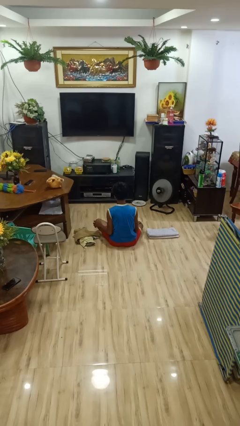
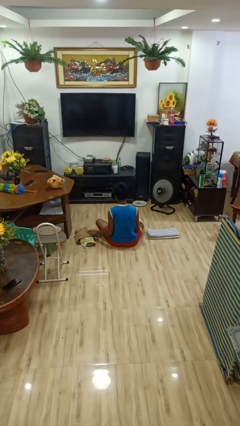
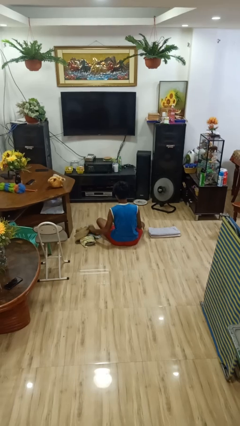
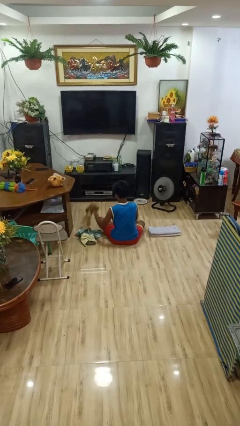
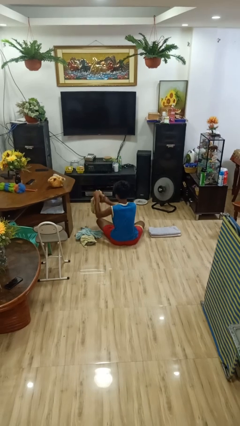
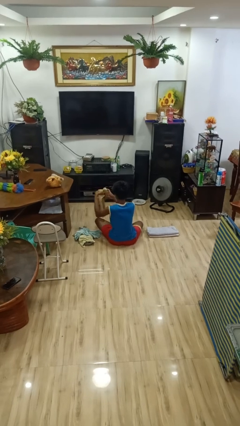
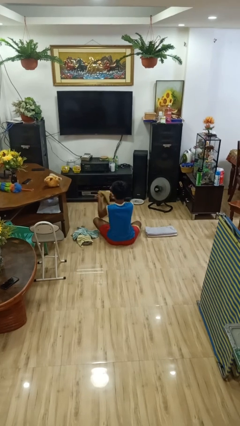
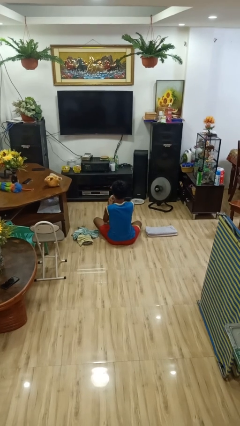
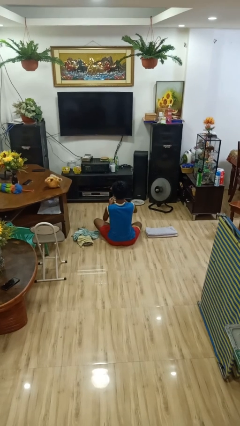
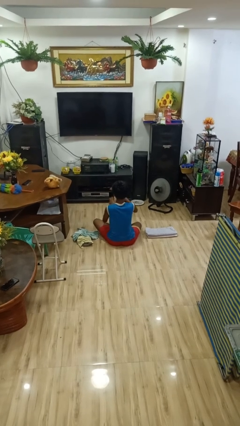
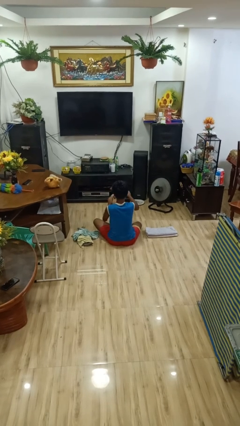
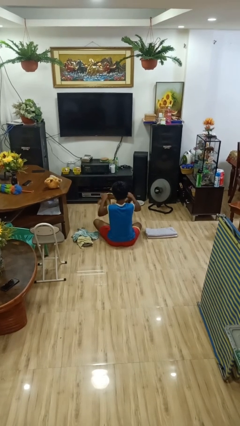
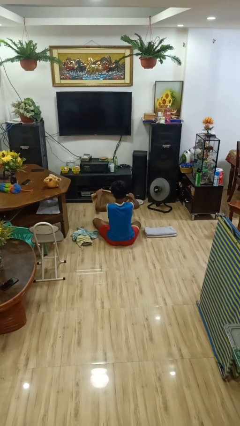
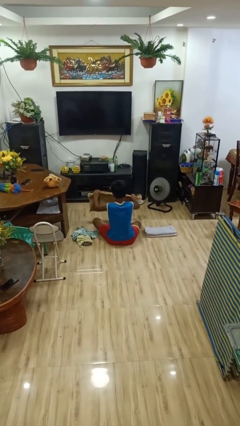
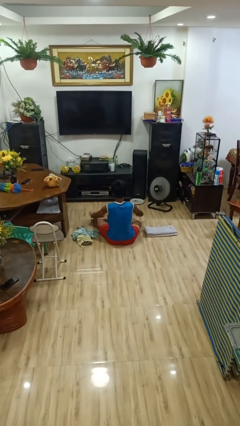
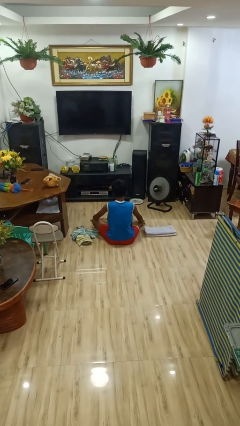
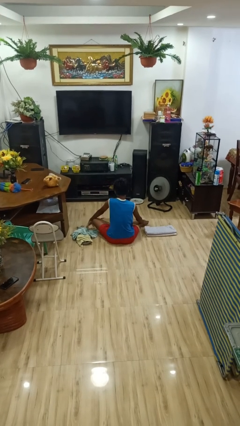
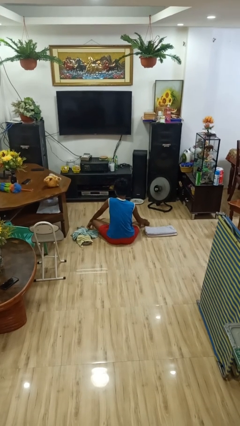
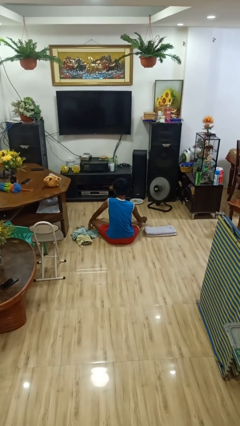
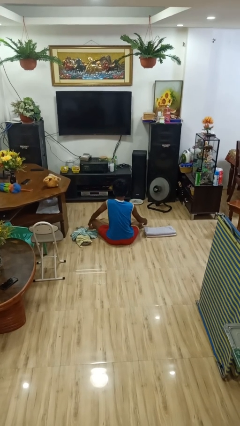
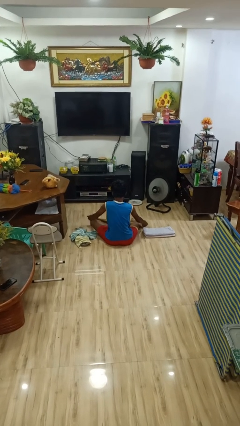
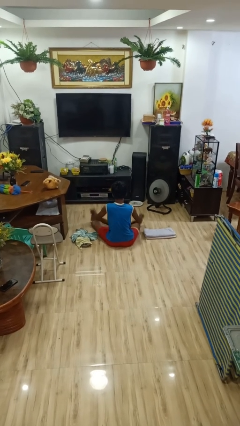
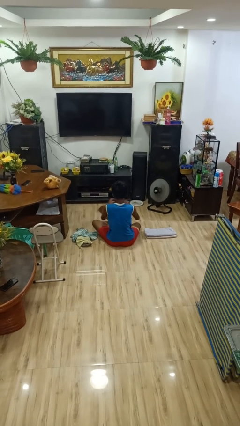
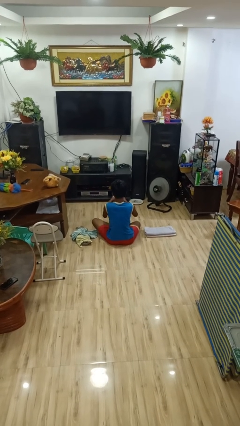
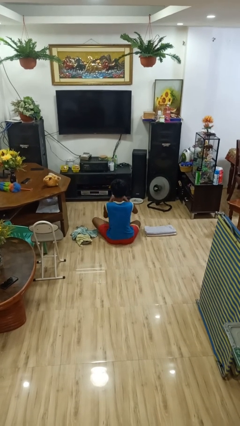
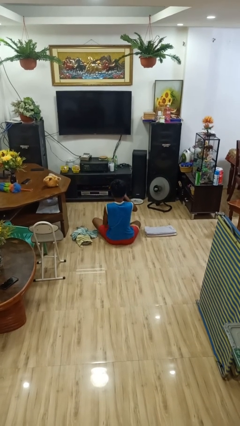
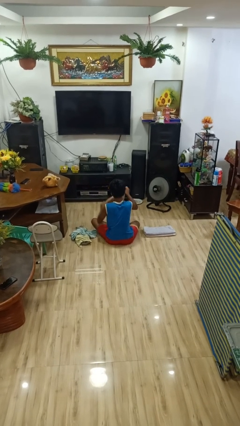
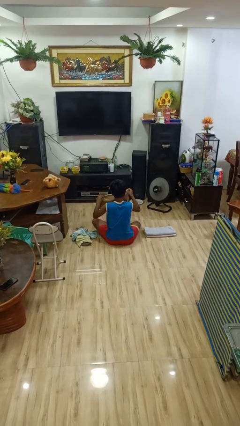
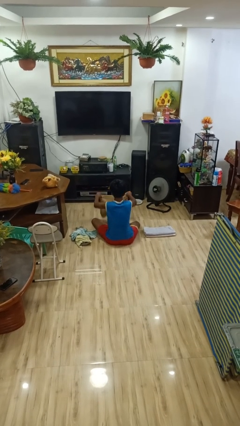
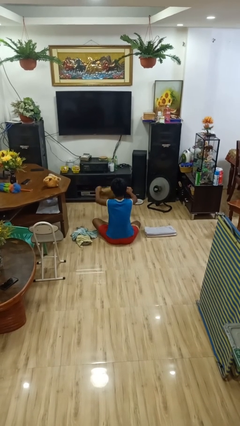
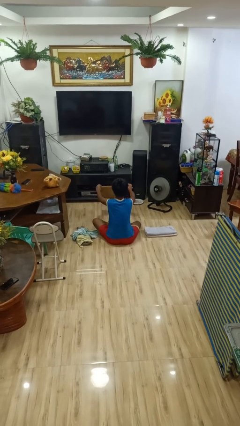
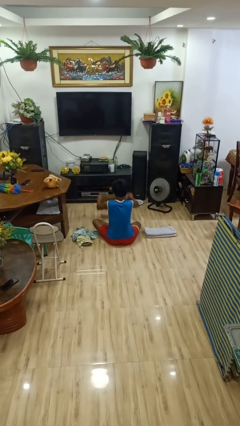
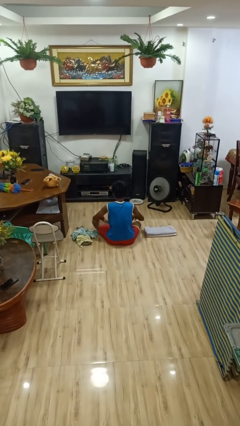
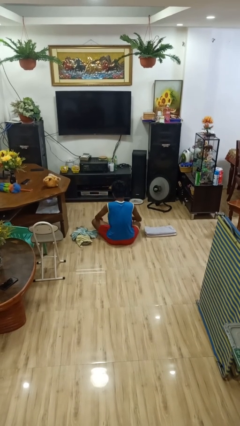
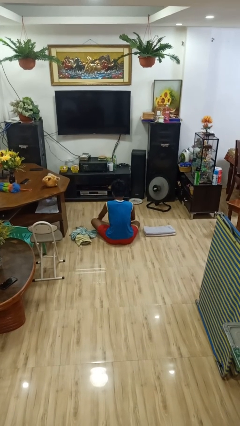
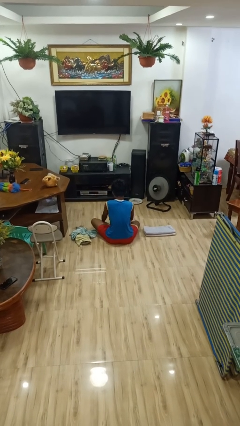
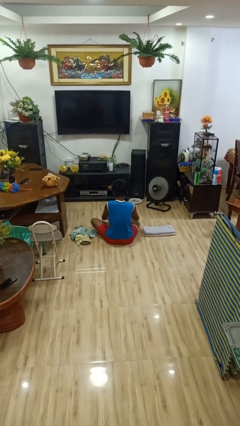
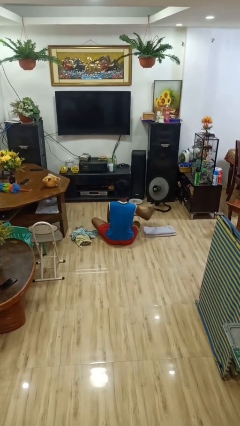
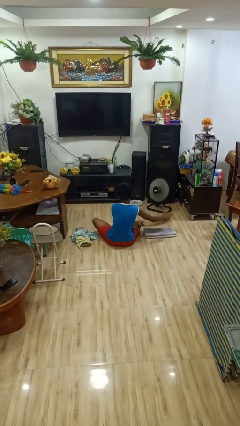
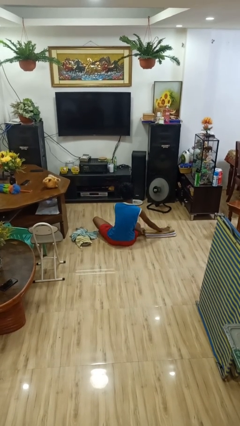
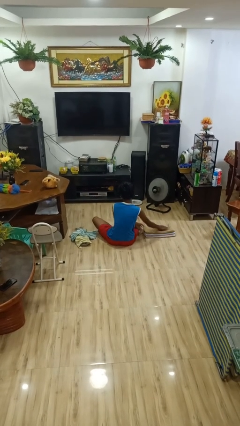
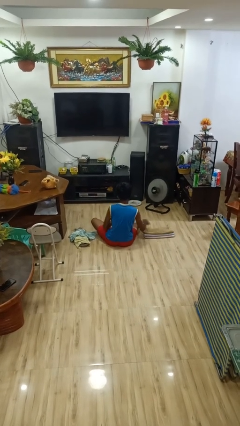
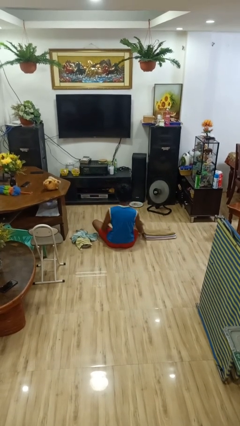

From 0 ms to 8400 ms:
person folds towel

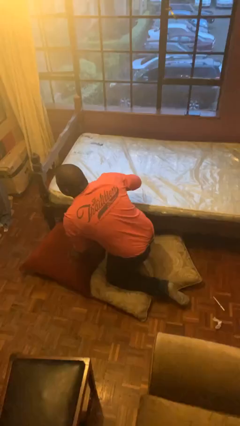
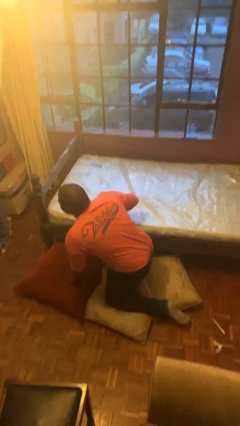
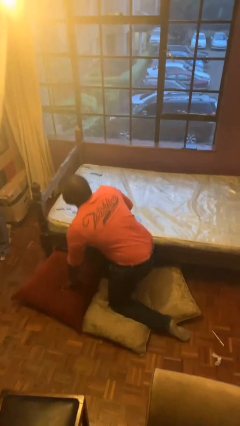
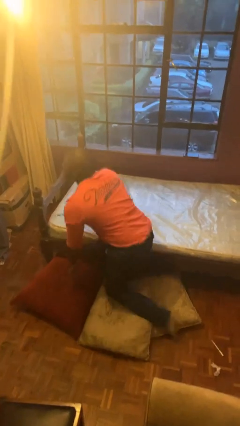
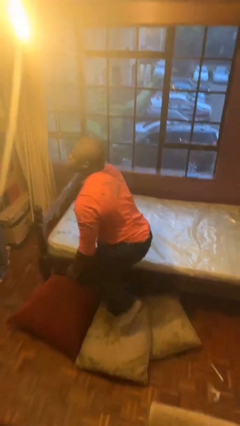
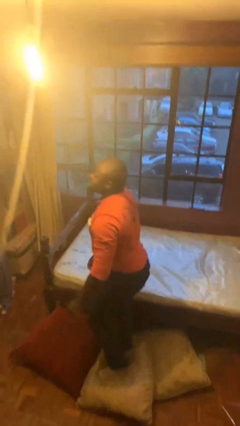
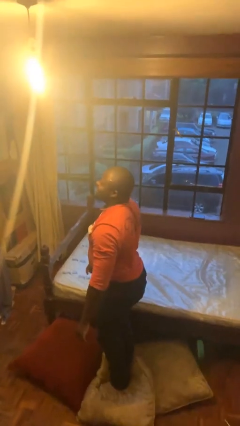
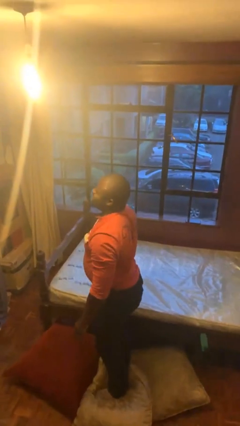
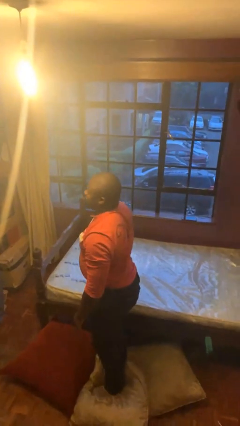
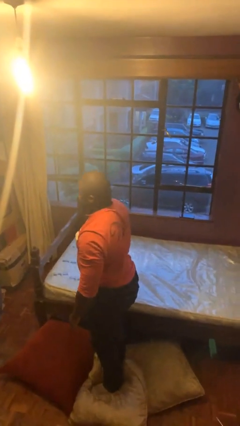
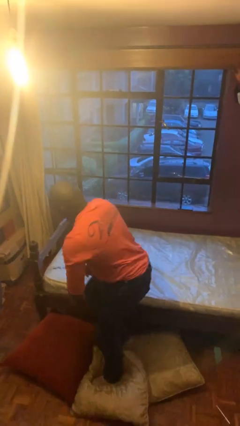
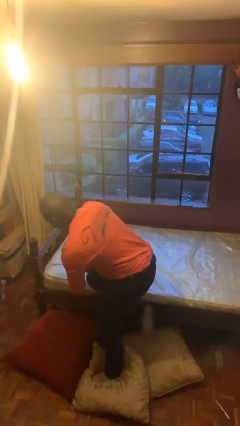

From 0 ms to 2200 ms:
person stands up from floor

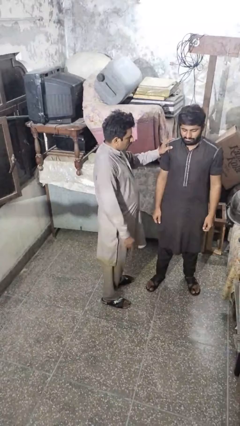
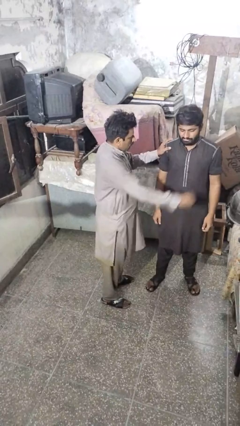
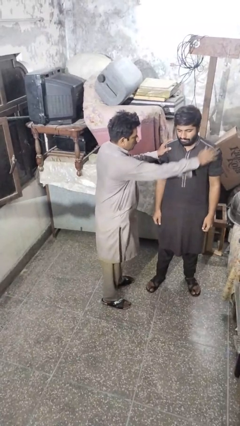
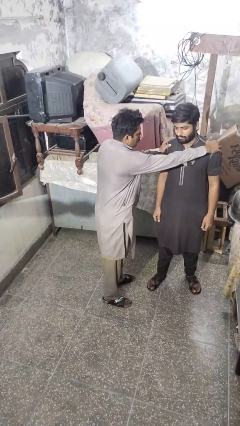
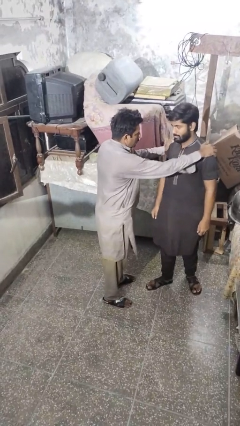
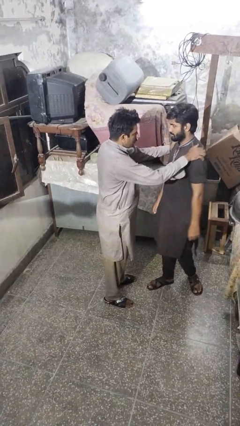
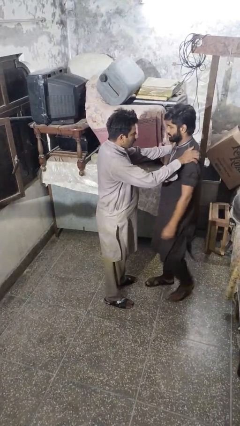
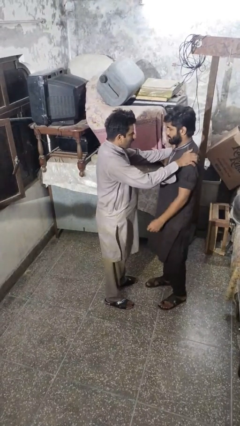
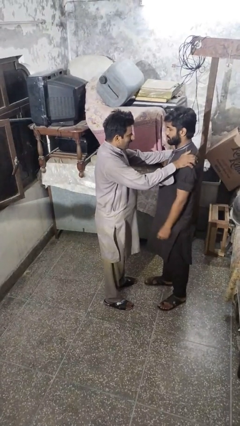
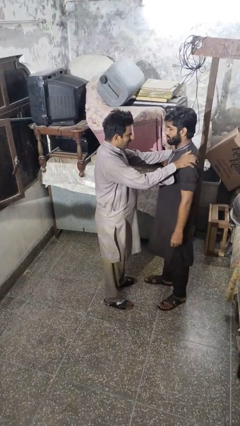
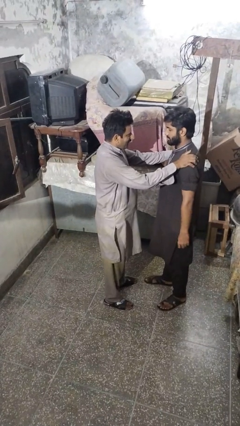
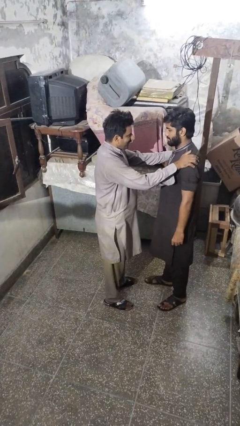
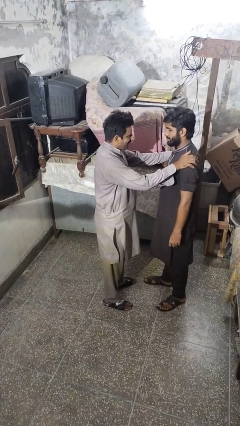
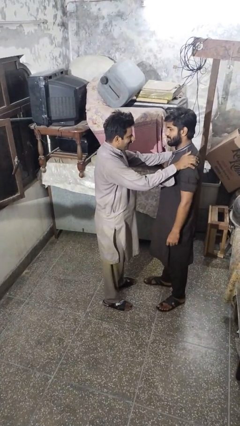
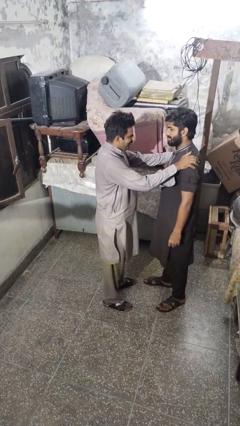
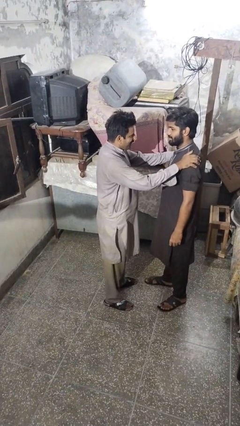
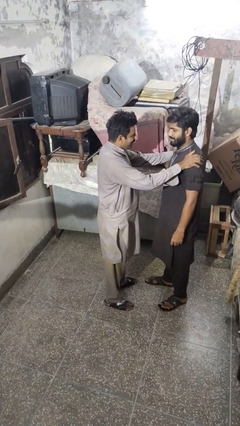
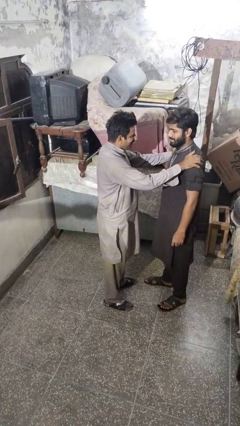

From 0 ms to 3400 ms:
person spins person around

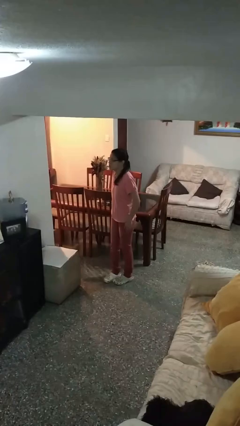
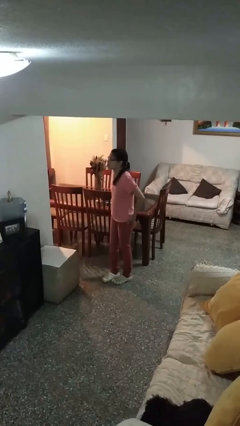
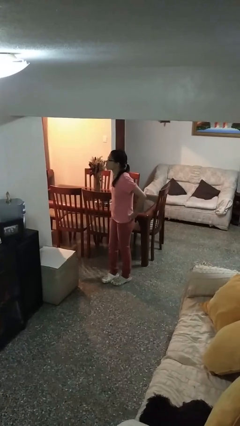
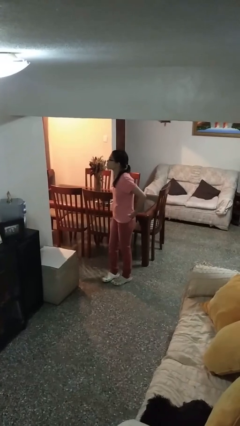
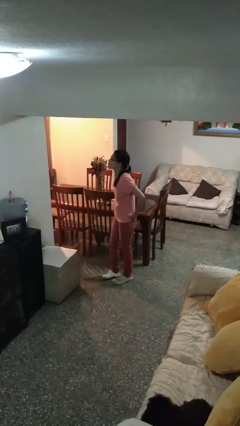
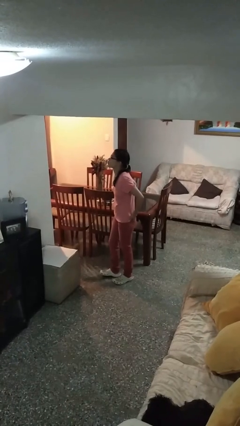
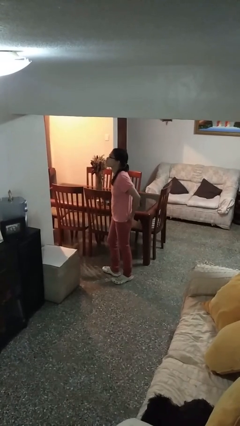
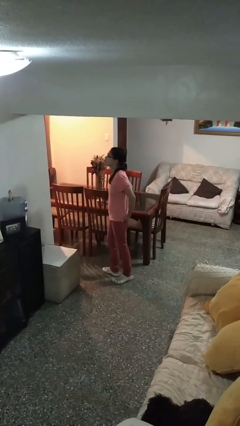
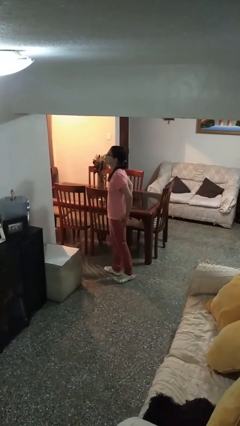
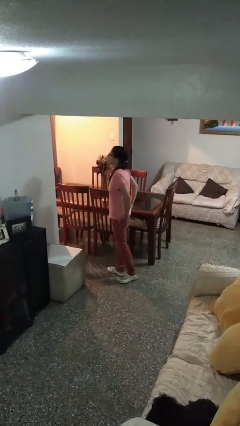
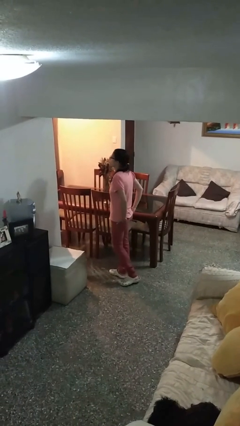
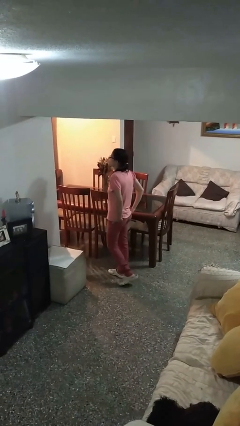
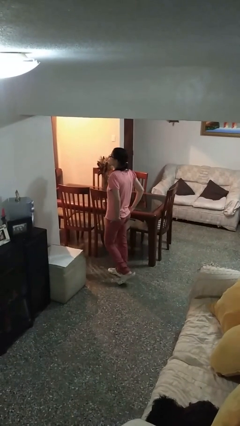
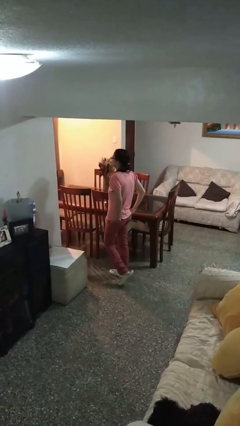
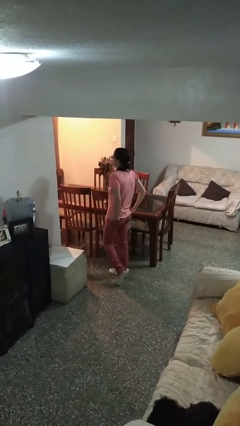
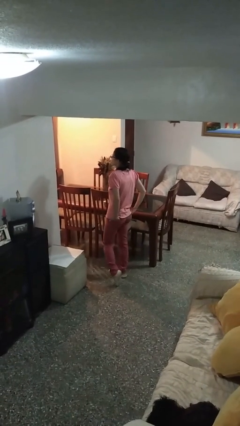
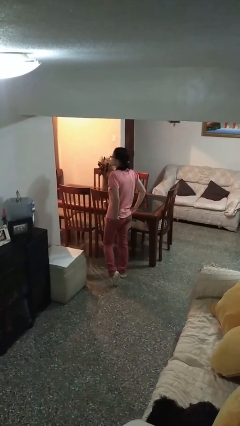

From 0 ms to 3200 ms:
person puts hands in back pockets

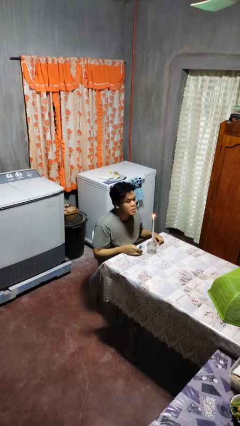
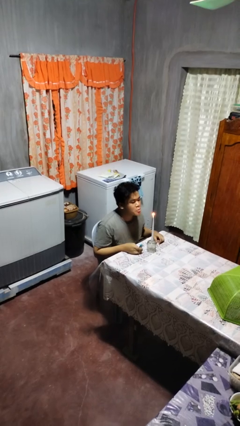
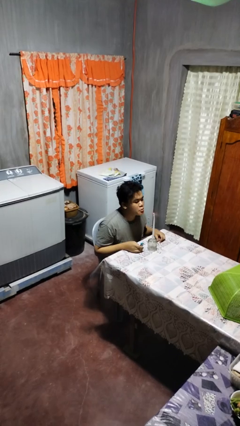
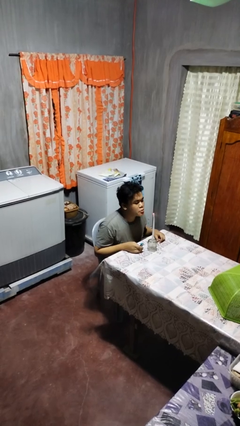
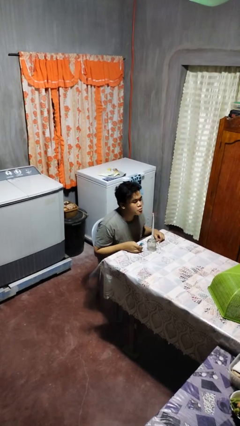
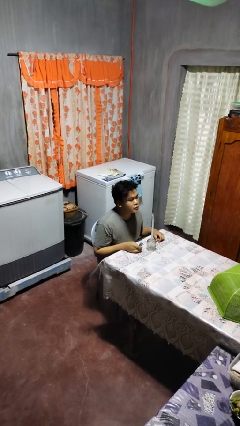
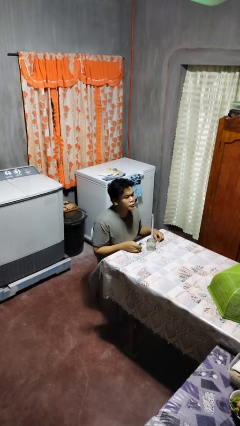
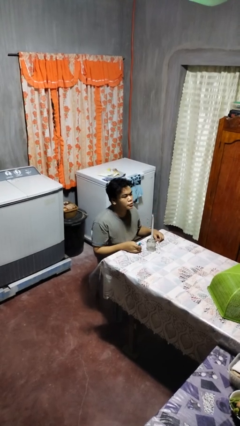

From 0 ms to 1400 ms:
person extinguishes candle
